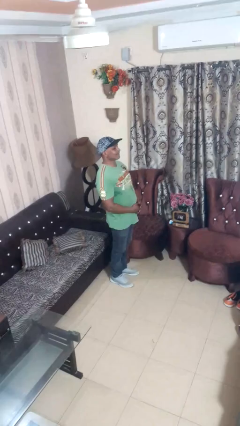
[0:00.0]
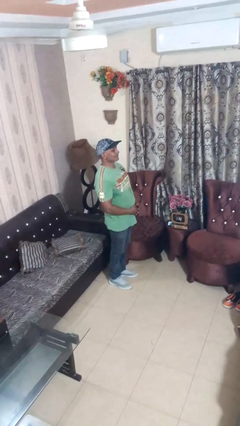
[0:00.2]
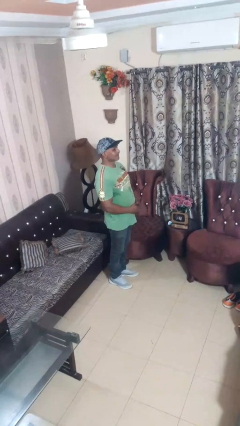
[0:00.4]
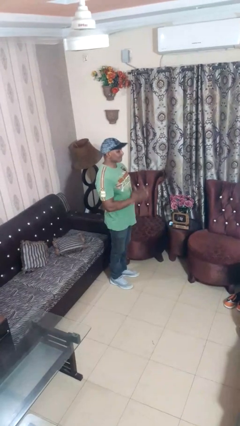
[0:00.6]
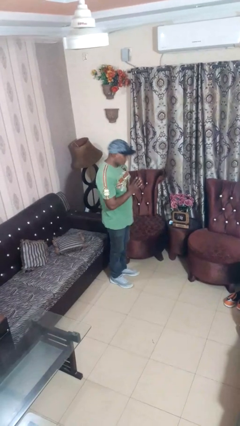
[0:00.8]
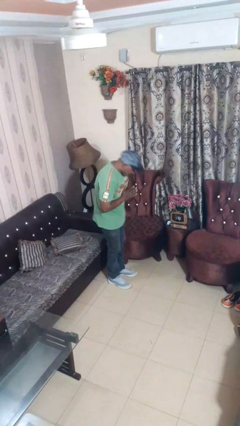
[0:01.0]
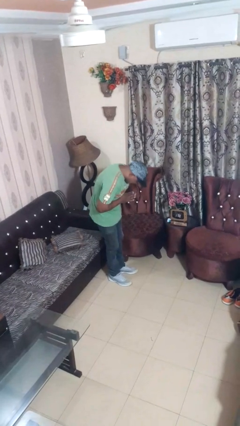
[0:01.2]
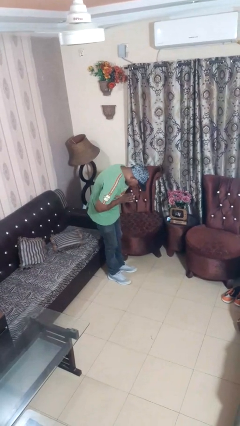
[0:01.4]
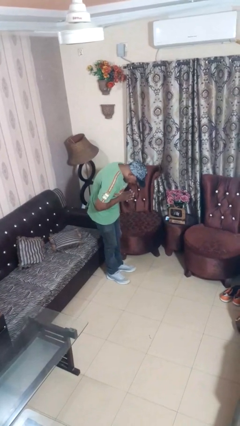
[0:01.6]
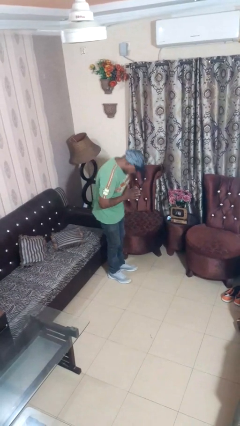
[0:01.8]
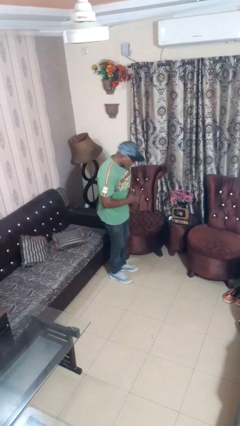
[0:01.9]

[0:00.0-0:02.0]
person bows

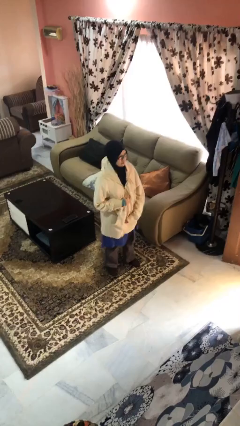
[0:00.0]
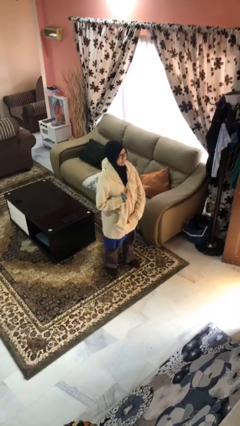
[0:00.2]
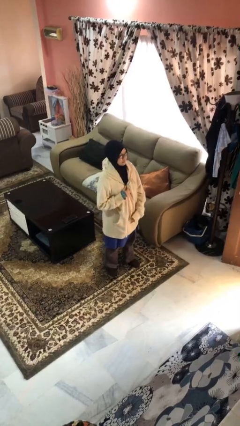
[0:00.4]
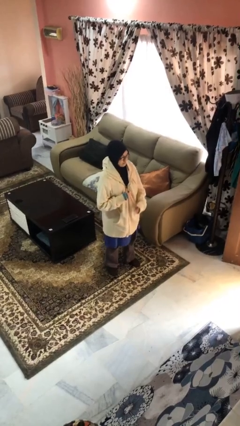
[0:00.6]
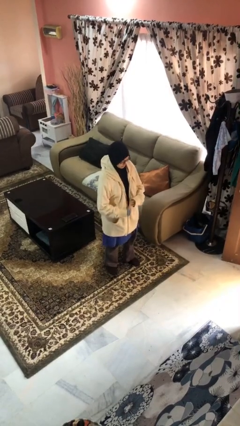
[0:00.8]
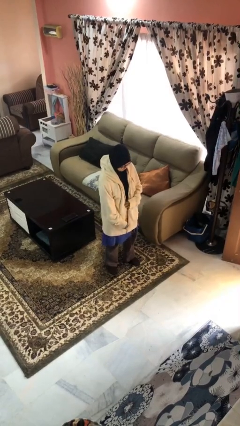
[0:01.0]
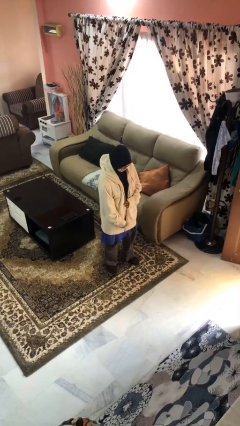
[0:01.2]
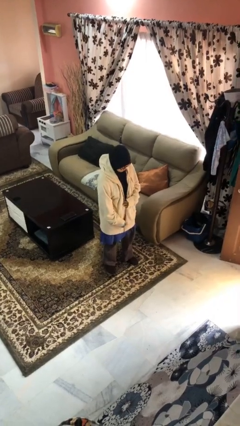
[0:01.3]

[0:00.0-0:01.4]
person unzips jacket

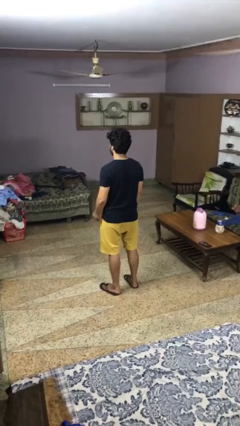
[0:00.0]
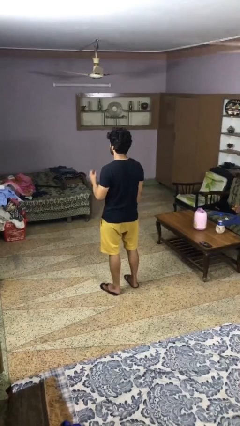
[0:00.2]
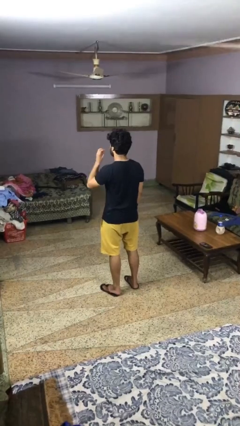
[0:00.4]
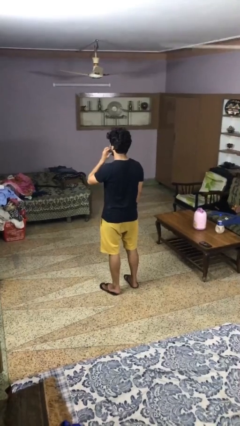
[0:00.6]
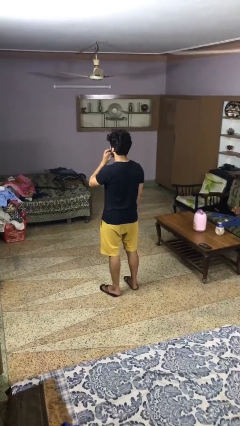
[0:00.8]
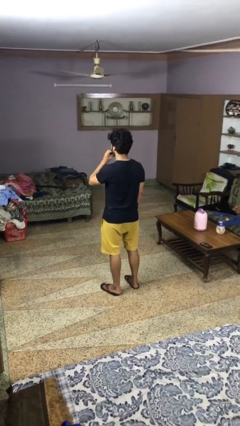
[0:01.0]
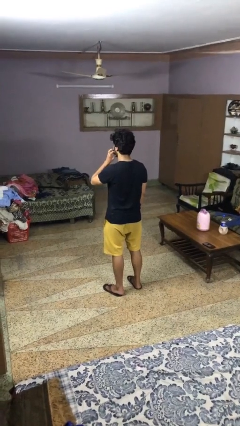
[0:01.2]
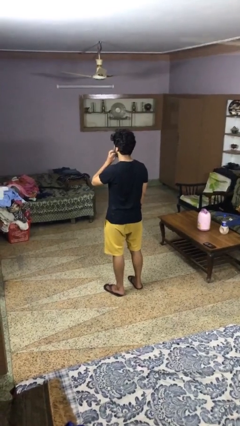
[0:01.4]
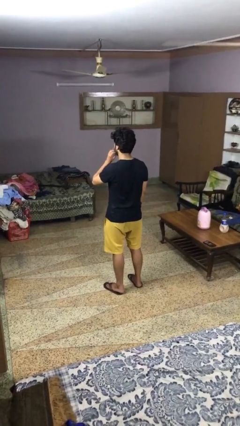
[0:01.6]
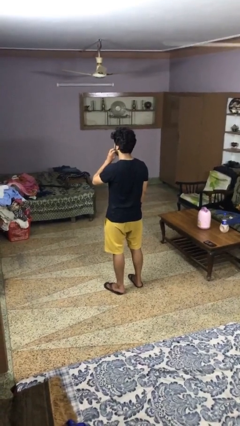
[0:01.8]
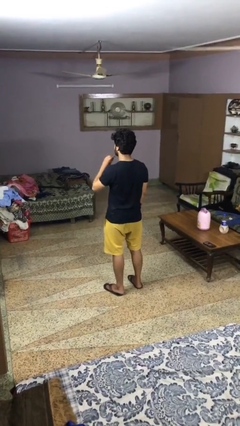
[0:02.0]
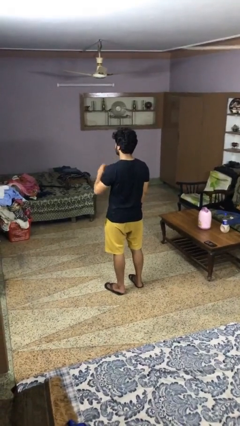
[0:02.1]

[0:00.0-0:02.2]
person scratches face

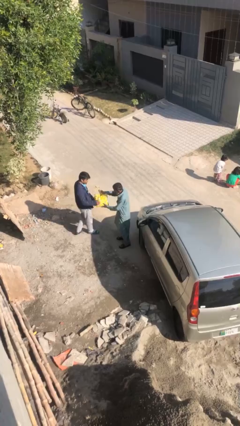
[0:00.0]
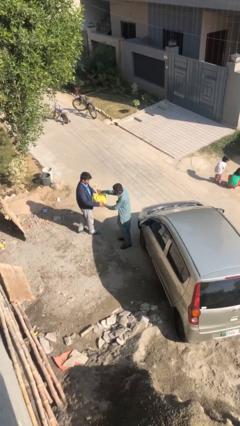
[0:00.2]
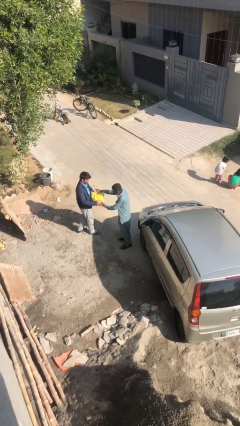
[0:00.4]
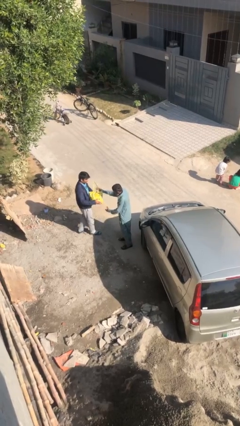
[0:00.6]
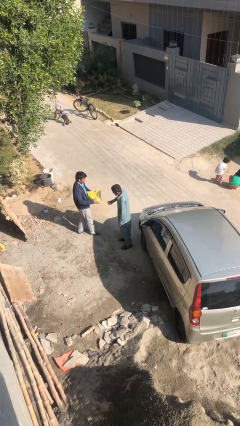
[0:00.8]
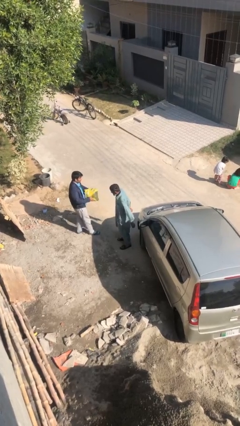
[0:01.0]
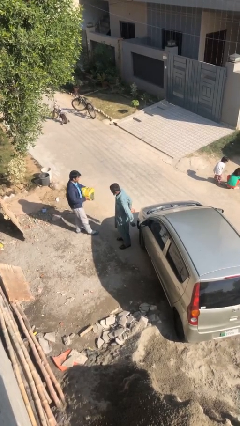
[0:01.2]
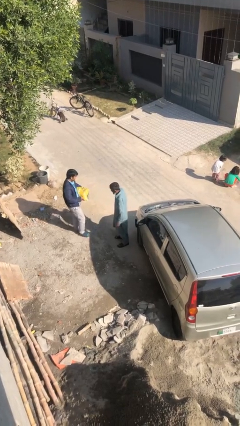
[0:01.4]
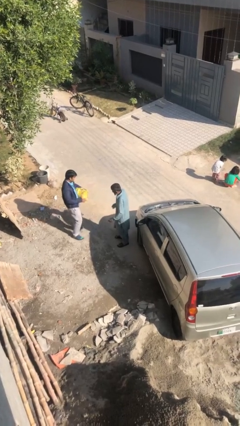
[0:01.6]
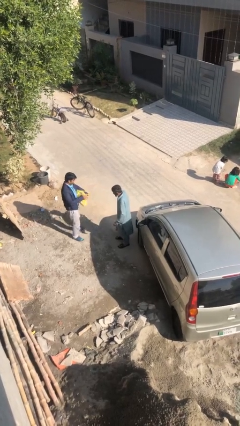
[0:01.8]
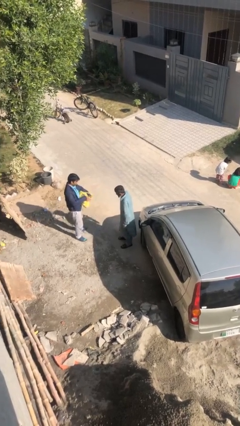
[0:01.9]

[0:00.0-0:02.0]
person transfers object to person

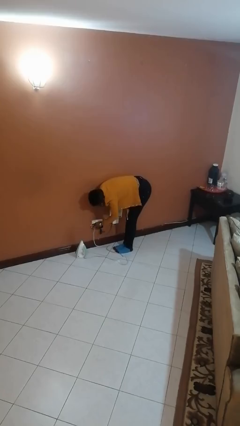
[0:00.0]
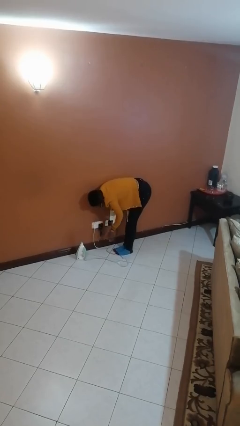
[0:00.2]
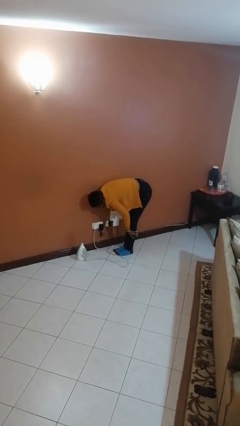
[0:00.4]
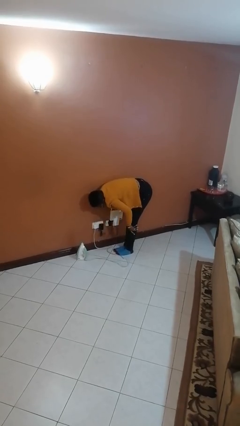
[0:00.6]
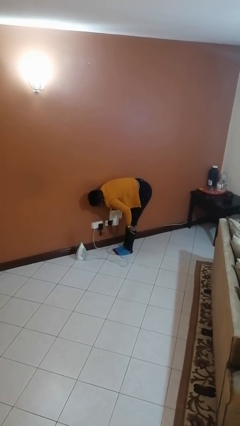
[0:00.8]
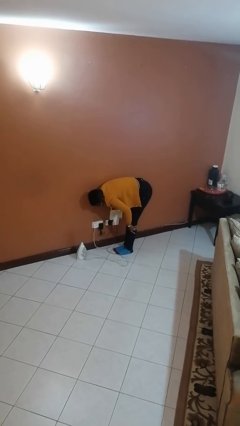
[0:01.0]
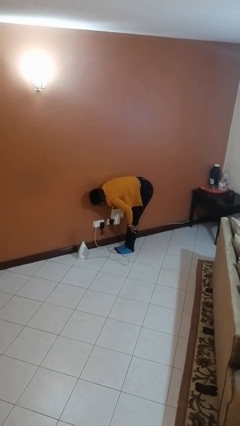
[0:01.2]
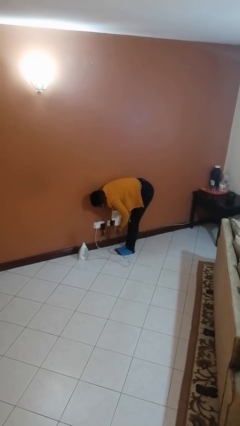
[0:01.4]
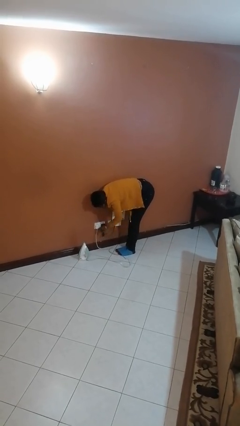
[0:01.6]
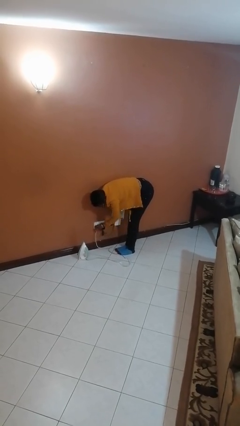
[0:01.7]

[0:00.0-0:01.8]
person plugs into electrical socket

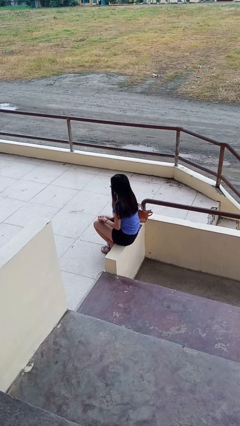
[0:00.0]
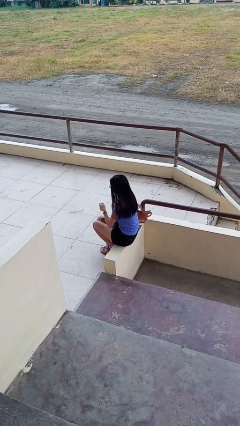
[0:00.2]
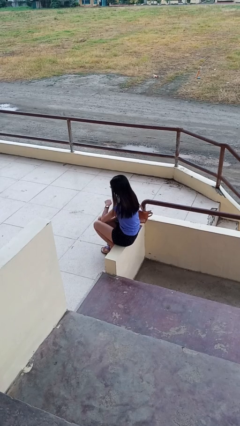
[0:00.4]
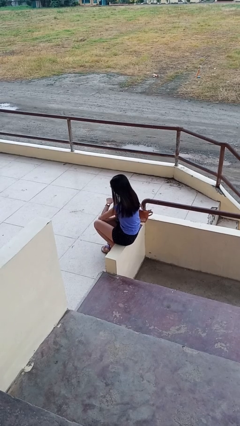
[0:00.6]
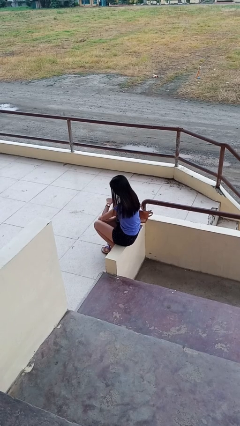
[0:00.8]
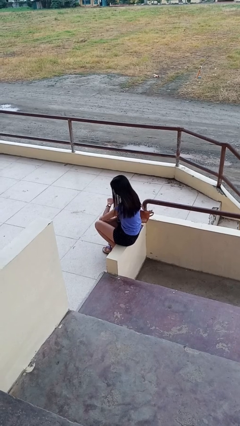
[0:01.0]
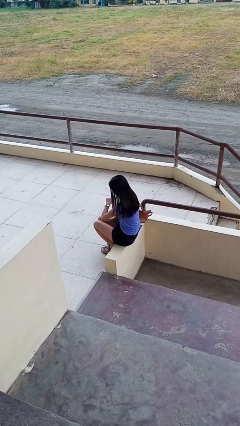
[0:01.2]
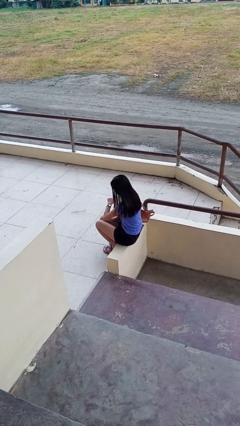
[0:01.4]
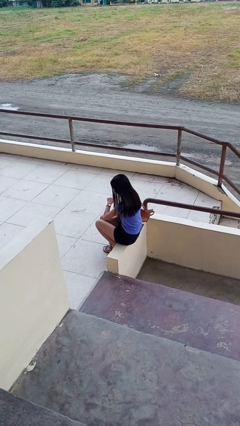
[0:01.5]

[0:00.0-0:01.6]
person looks at wristwatch

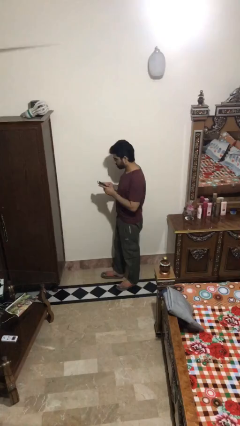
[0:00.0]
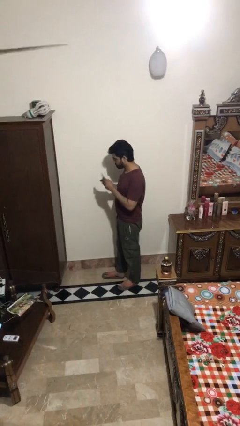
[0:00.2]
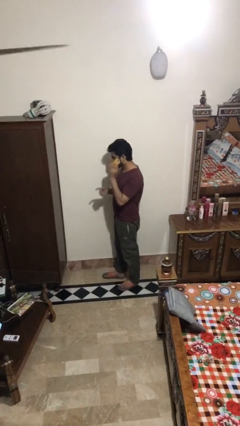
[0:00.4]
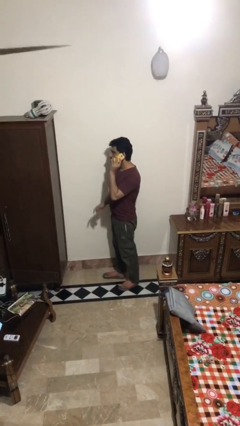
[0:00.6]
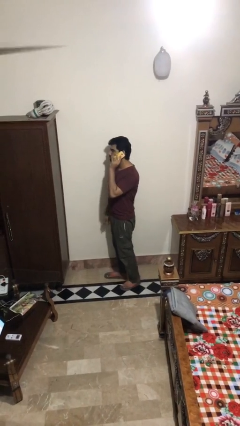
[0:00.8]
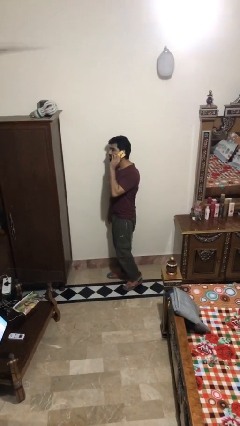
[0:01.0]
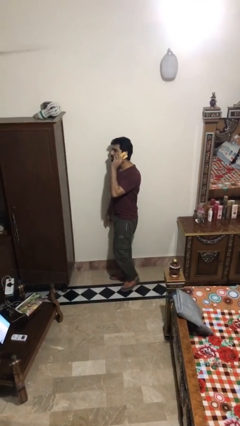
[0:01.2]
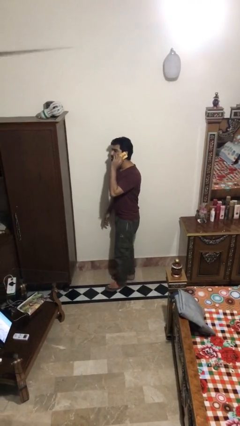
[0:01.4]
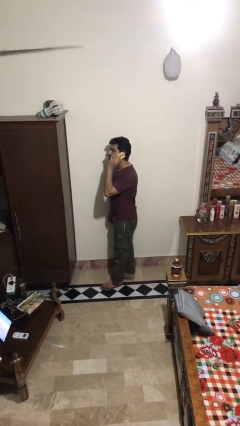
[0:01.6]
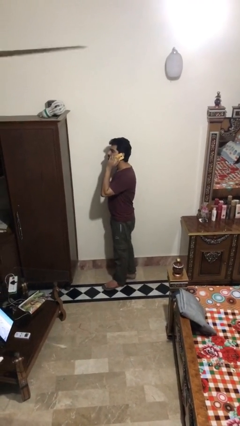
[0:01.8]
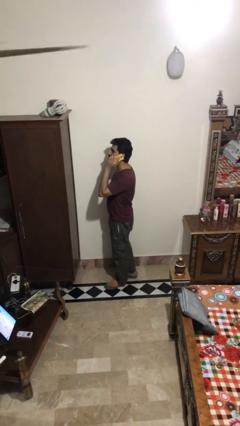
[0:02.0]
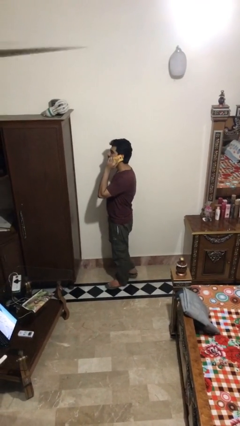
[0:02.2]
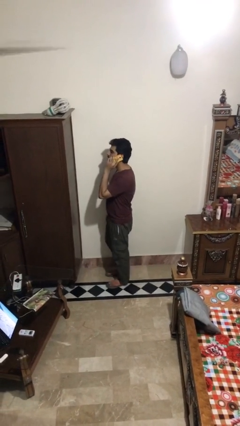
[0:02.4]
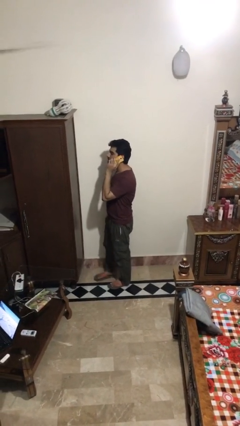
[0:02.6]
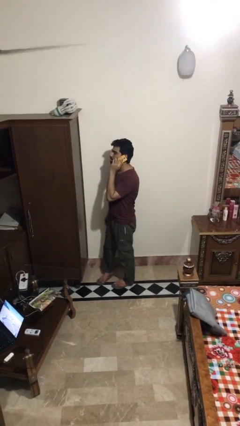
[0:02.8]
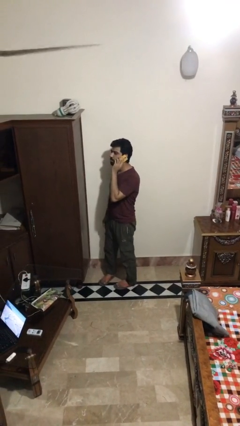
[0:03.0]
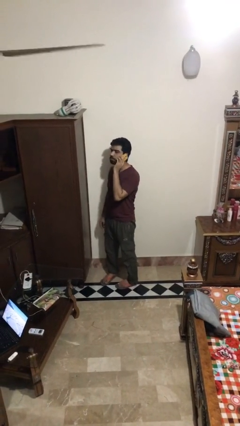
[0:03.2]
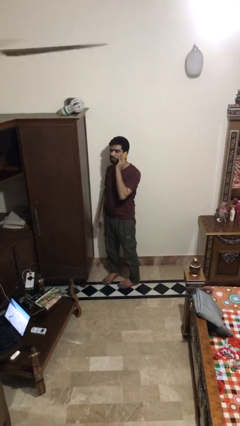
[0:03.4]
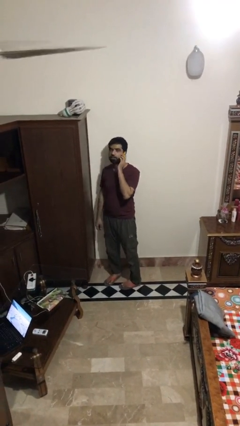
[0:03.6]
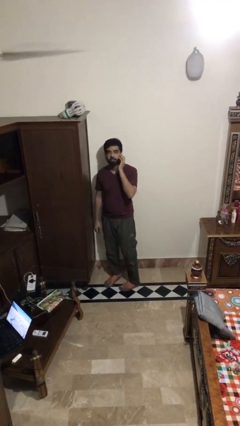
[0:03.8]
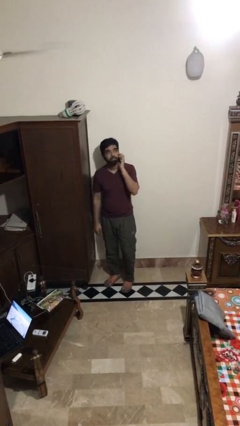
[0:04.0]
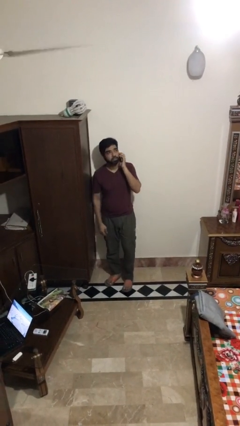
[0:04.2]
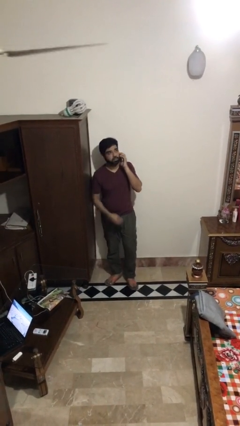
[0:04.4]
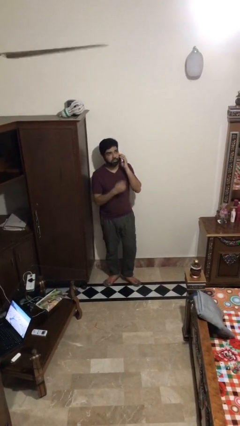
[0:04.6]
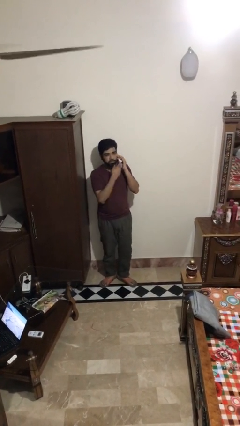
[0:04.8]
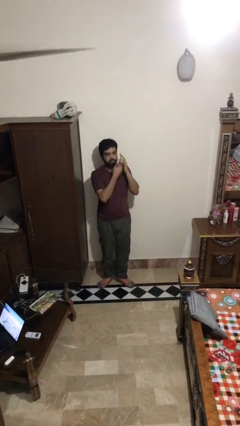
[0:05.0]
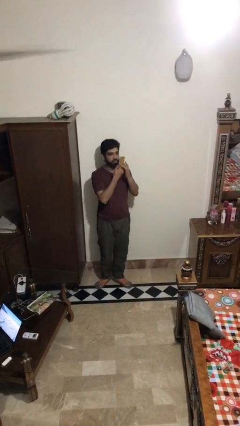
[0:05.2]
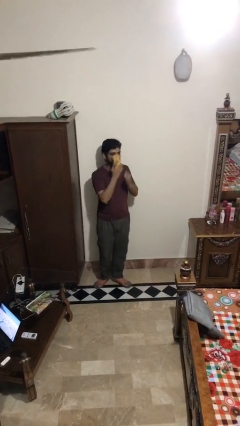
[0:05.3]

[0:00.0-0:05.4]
person talks on phone

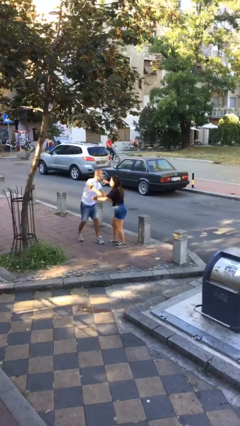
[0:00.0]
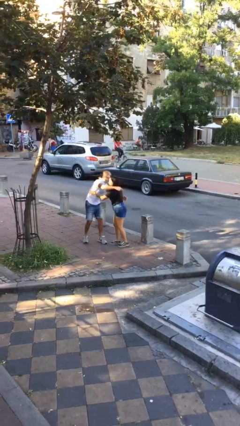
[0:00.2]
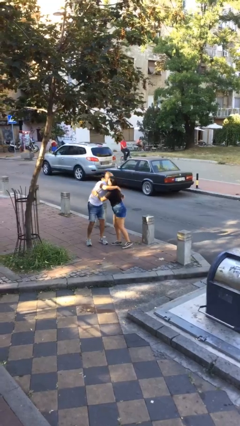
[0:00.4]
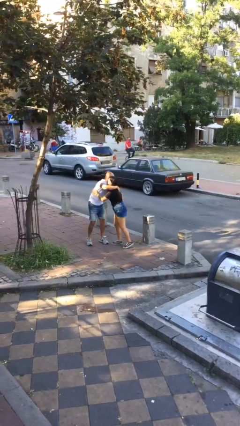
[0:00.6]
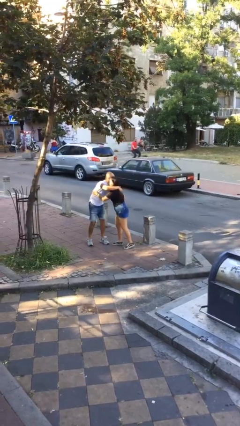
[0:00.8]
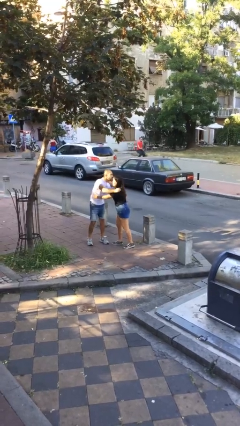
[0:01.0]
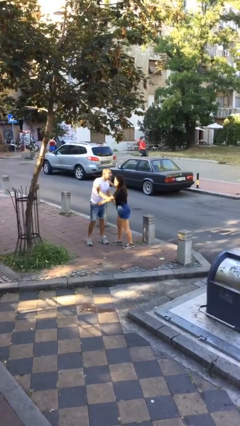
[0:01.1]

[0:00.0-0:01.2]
person embraces person
